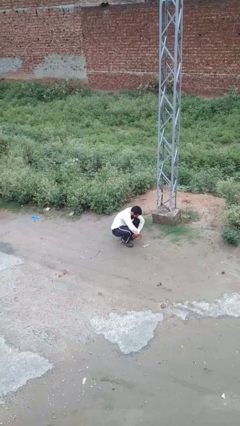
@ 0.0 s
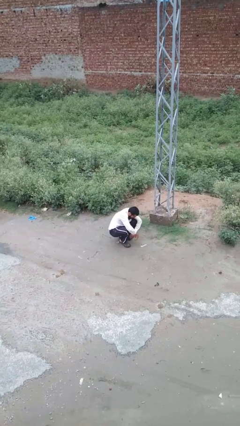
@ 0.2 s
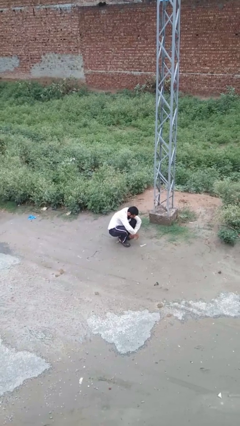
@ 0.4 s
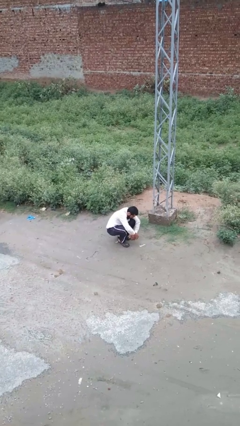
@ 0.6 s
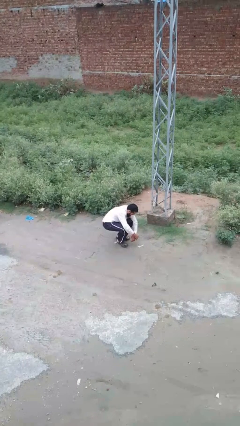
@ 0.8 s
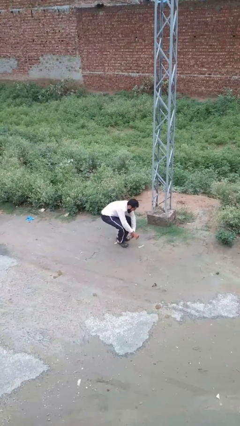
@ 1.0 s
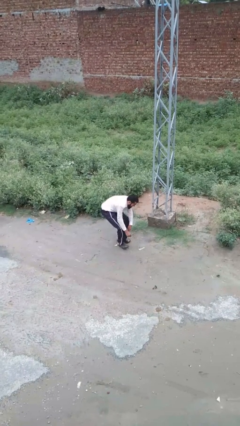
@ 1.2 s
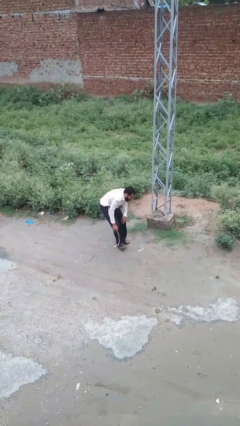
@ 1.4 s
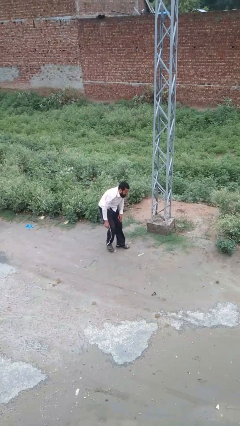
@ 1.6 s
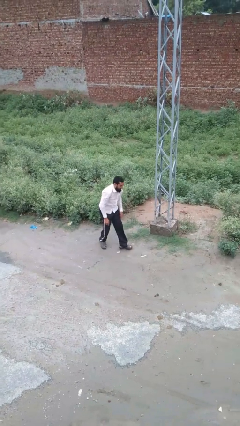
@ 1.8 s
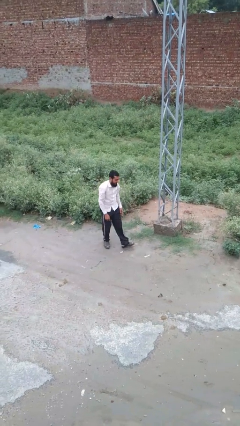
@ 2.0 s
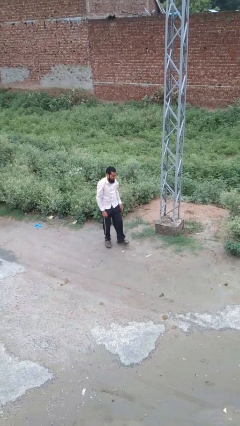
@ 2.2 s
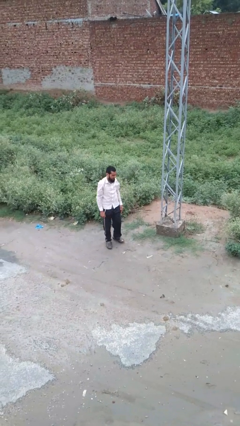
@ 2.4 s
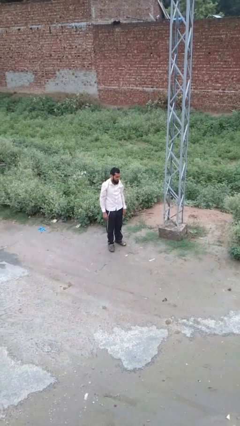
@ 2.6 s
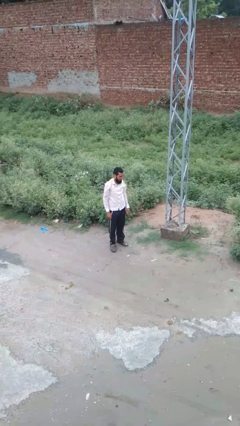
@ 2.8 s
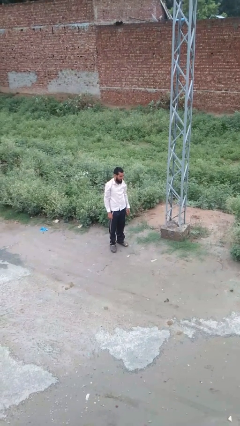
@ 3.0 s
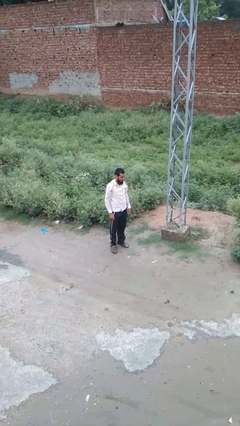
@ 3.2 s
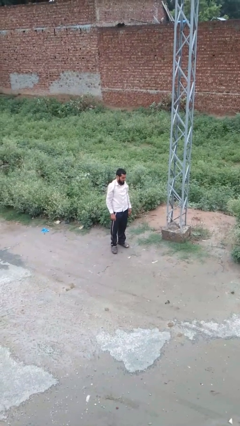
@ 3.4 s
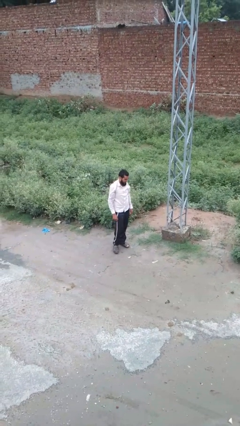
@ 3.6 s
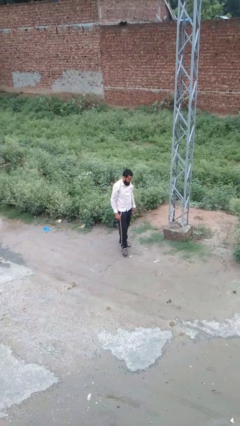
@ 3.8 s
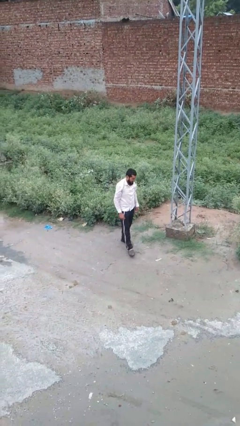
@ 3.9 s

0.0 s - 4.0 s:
person stands up from floor

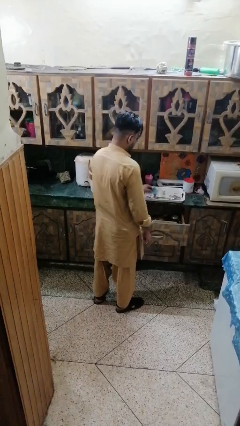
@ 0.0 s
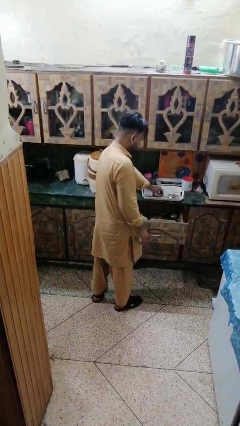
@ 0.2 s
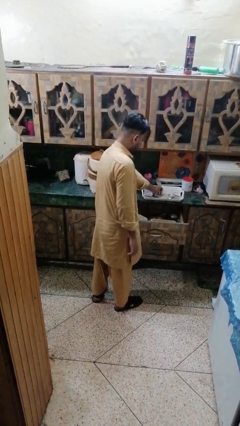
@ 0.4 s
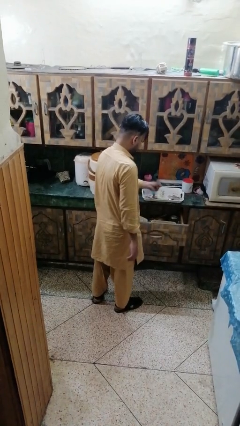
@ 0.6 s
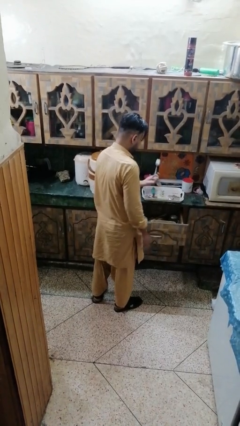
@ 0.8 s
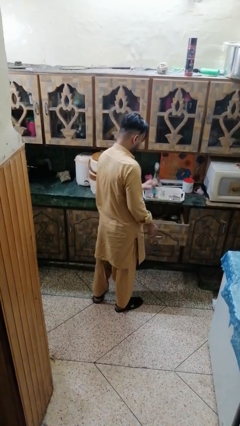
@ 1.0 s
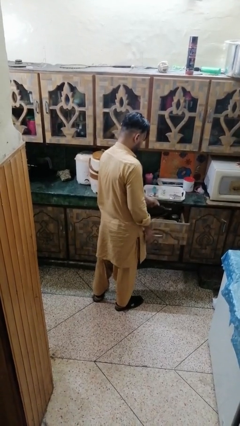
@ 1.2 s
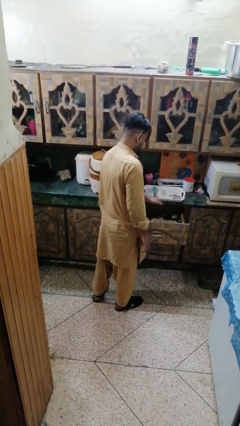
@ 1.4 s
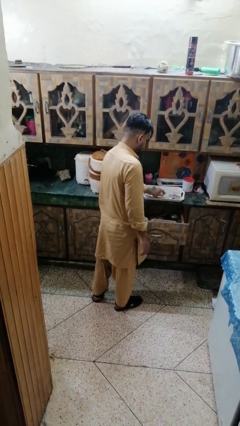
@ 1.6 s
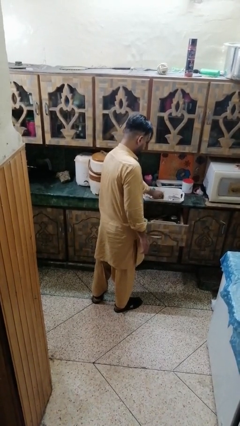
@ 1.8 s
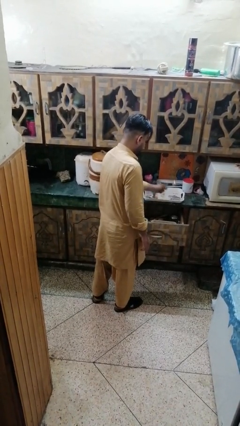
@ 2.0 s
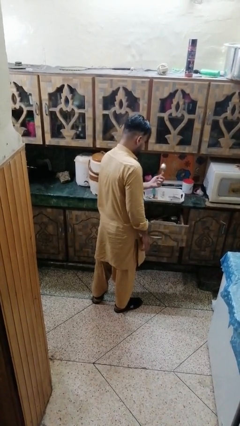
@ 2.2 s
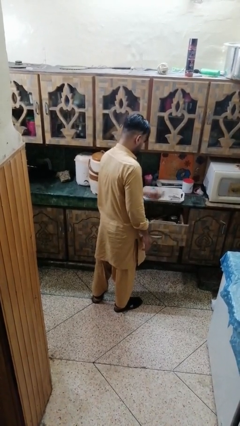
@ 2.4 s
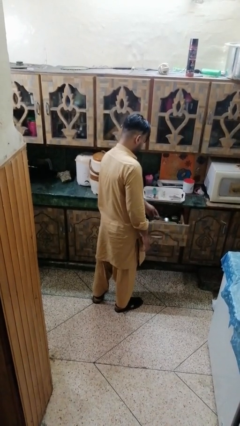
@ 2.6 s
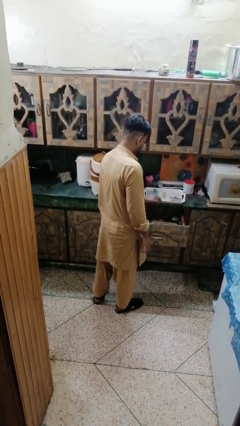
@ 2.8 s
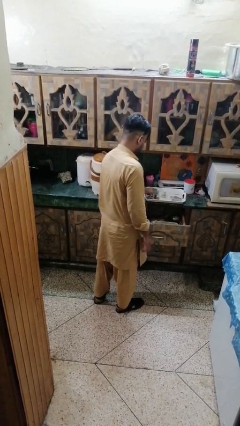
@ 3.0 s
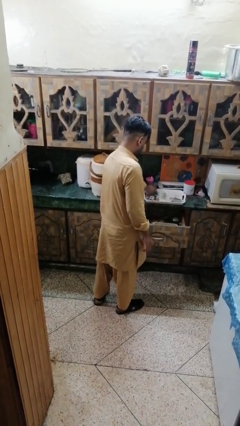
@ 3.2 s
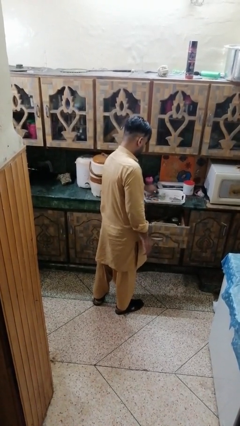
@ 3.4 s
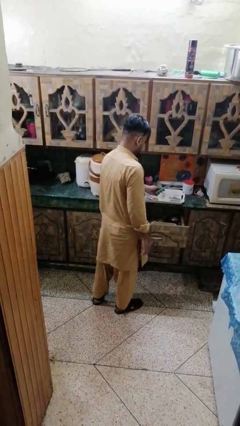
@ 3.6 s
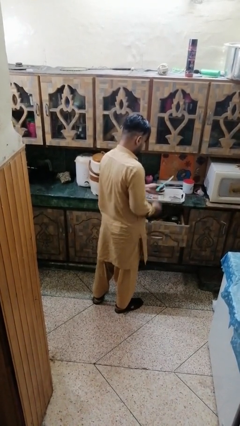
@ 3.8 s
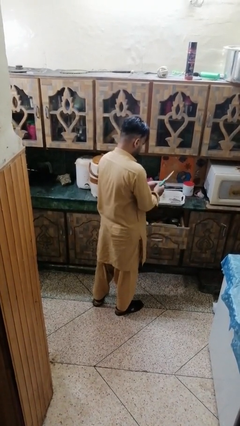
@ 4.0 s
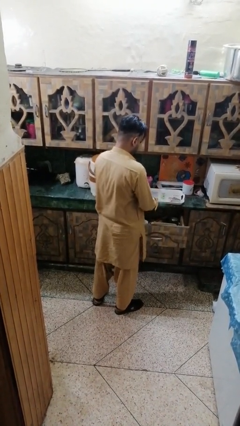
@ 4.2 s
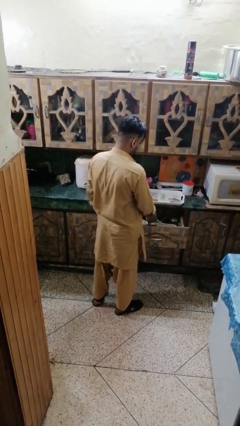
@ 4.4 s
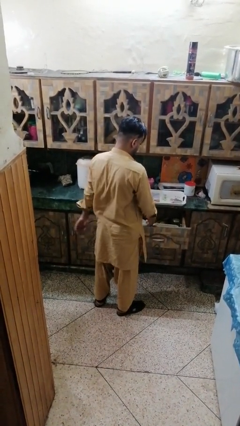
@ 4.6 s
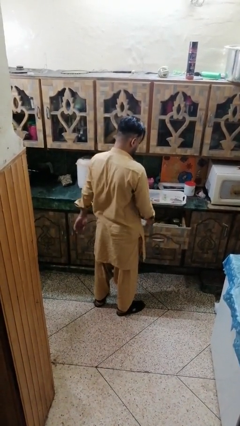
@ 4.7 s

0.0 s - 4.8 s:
person puts object into kitchen drawer

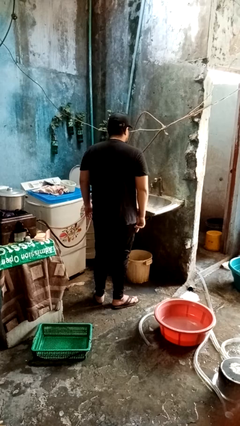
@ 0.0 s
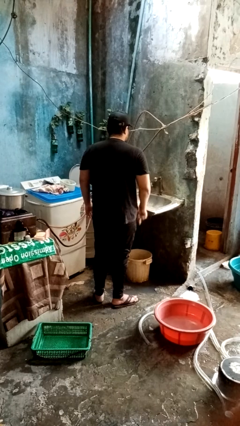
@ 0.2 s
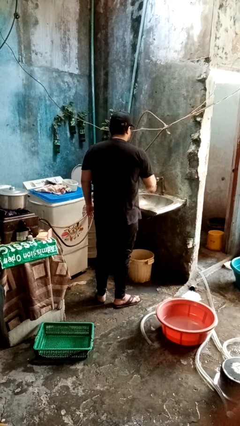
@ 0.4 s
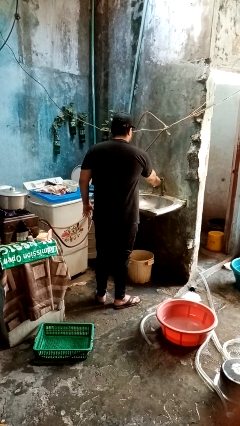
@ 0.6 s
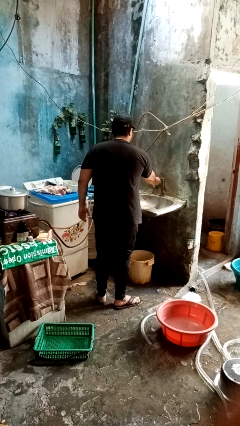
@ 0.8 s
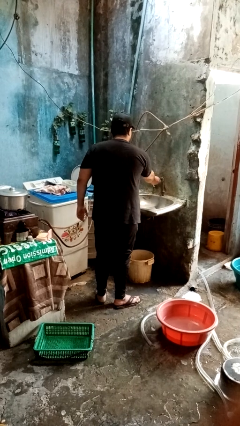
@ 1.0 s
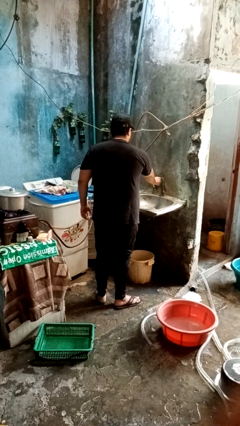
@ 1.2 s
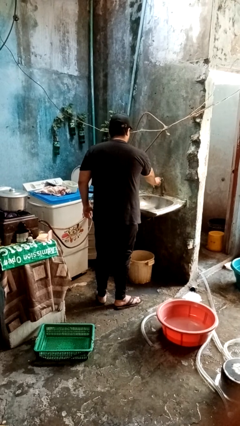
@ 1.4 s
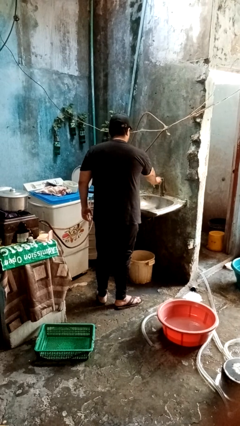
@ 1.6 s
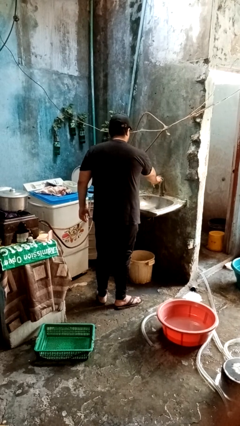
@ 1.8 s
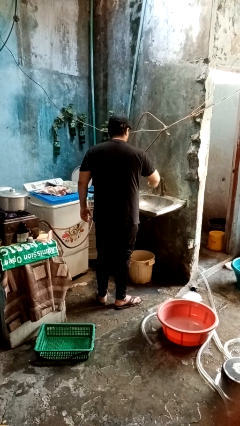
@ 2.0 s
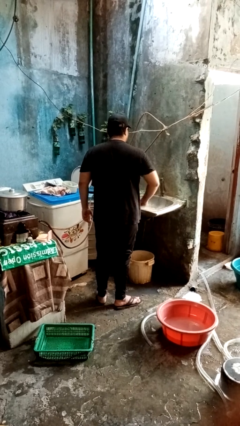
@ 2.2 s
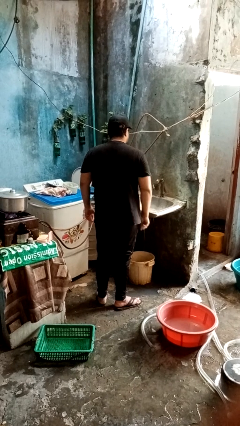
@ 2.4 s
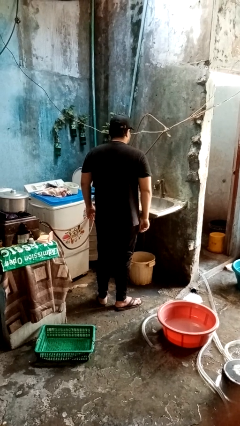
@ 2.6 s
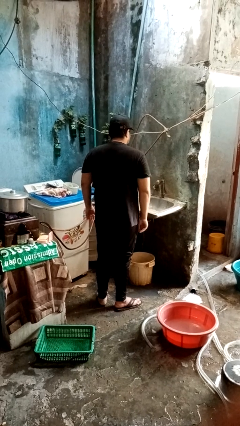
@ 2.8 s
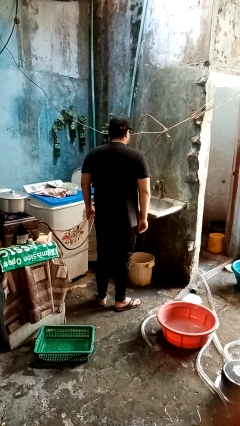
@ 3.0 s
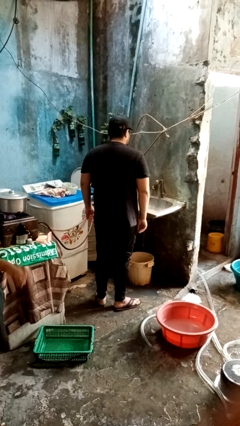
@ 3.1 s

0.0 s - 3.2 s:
person turns on faucet

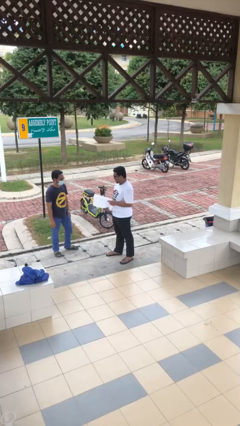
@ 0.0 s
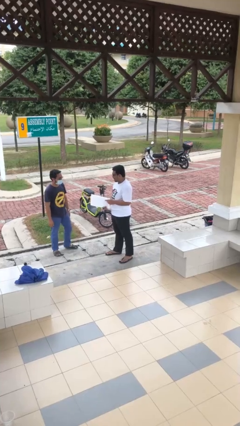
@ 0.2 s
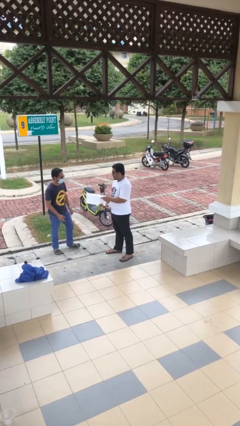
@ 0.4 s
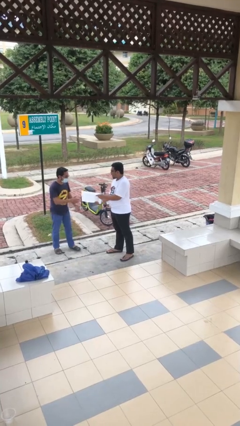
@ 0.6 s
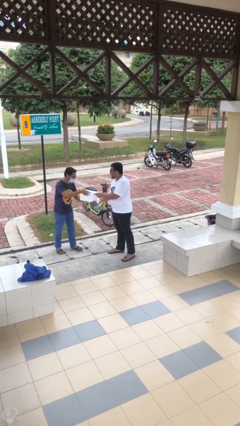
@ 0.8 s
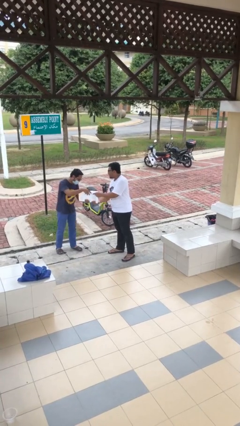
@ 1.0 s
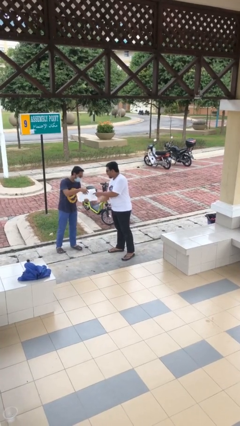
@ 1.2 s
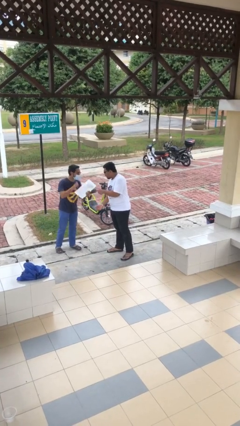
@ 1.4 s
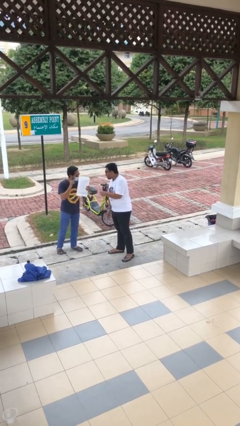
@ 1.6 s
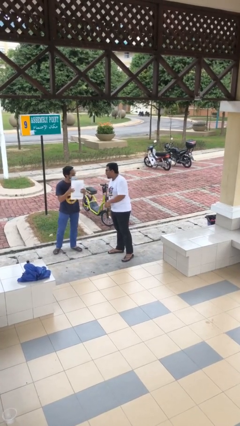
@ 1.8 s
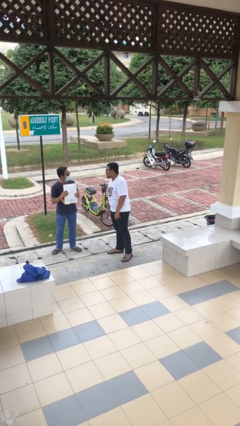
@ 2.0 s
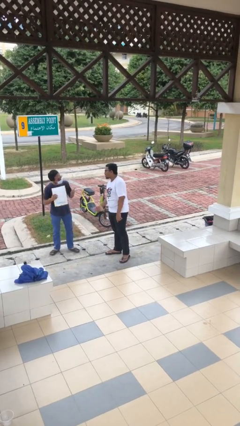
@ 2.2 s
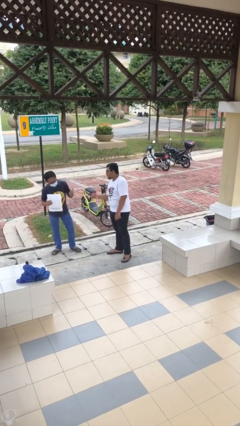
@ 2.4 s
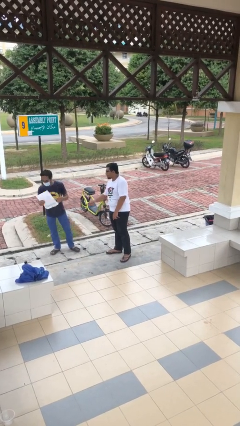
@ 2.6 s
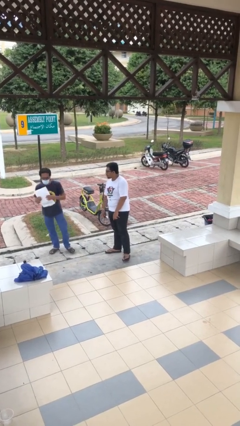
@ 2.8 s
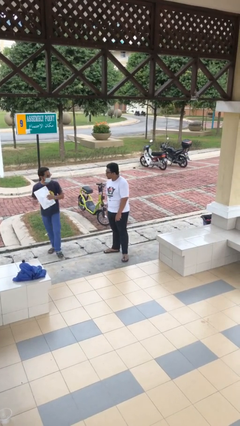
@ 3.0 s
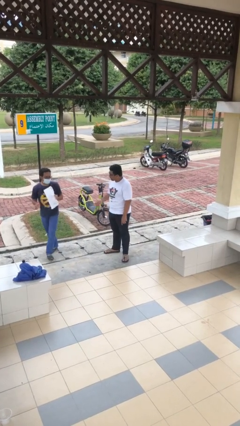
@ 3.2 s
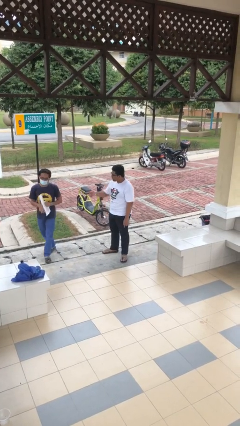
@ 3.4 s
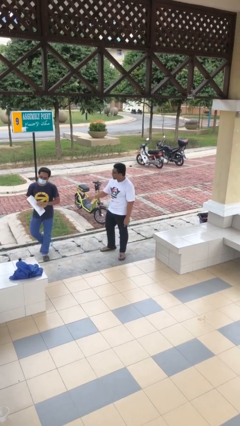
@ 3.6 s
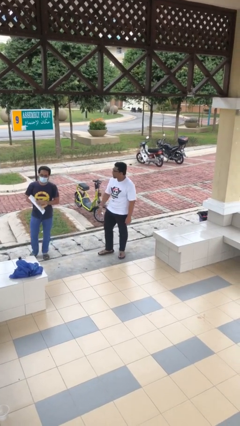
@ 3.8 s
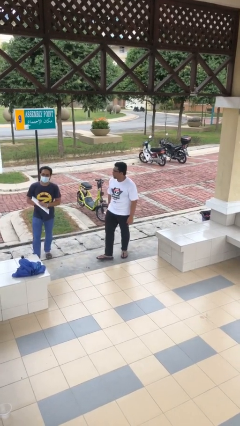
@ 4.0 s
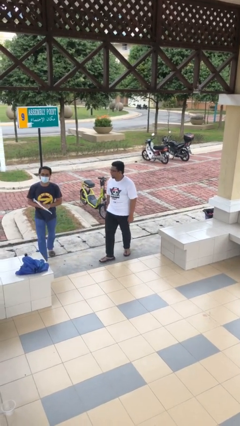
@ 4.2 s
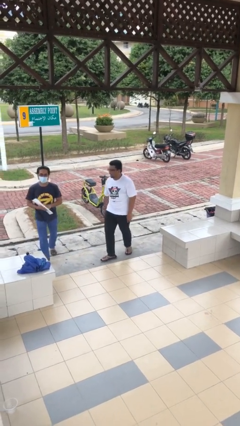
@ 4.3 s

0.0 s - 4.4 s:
person transfers object to person

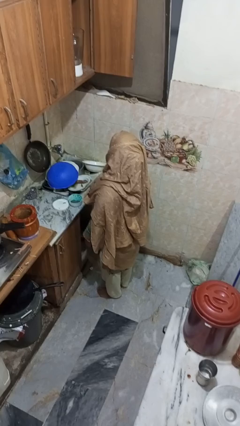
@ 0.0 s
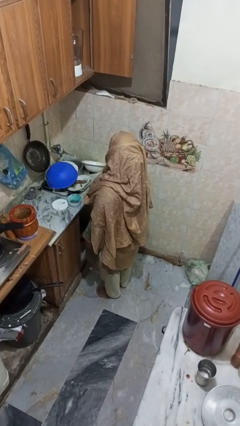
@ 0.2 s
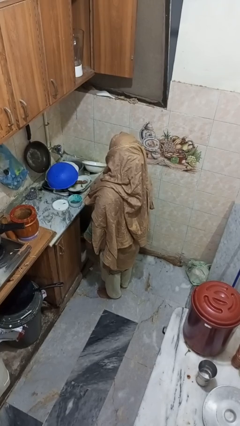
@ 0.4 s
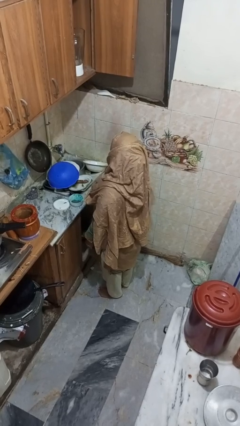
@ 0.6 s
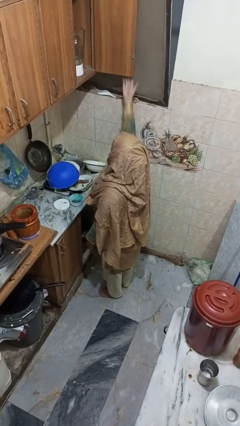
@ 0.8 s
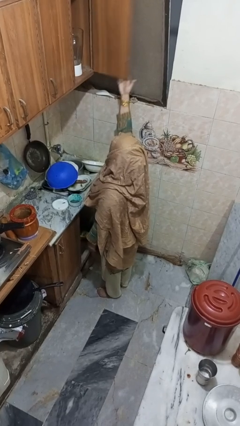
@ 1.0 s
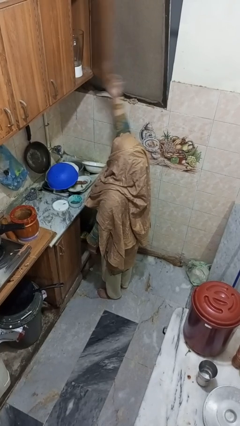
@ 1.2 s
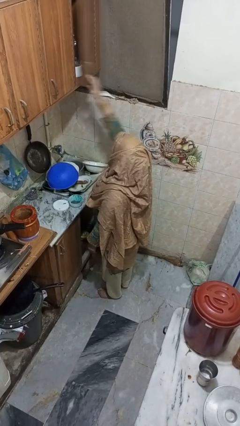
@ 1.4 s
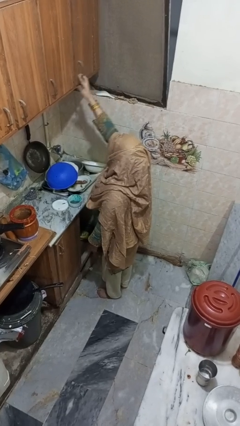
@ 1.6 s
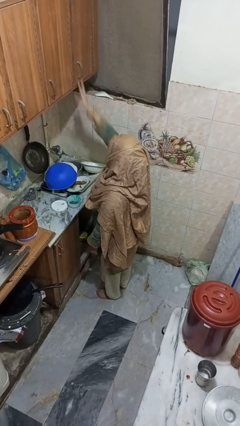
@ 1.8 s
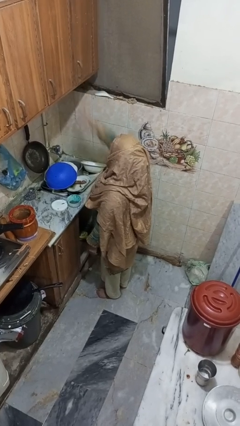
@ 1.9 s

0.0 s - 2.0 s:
person closes cabinet
